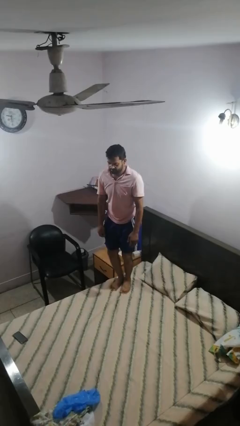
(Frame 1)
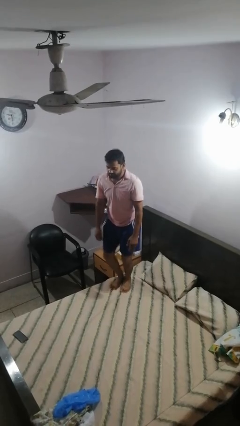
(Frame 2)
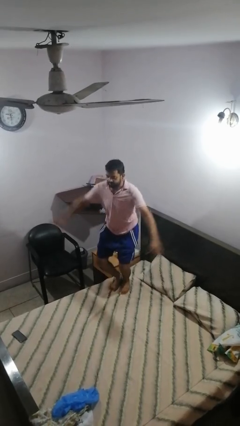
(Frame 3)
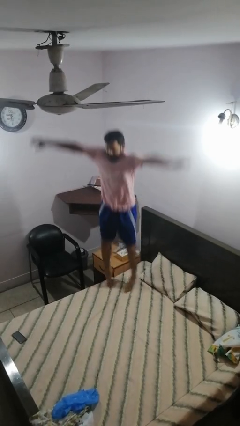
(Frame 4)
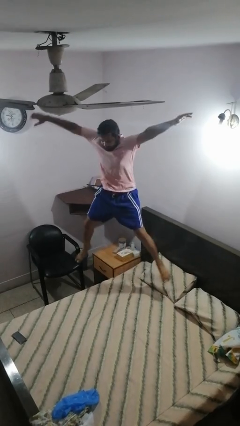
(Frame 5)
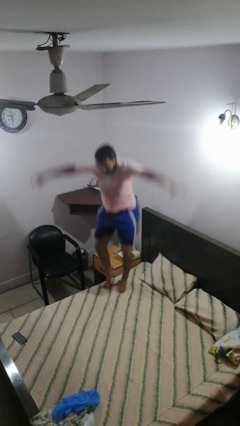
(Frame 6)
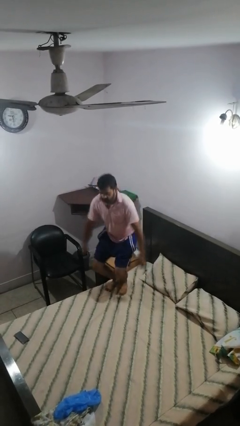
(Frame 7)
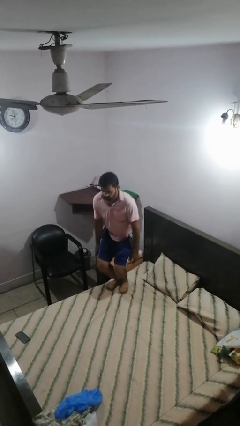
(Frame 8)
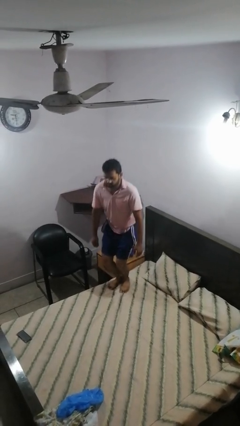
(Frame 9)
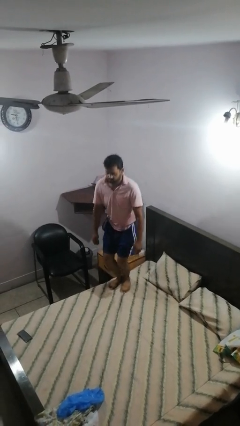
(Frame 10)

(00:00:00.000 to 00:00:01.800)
person jumps on bed

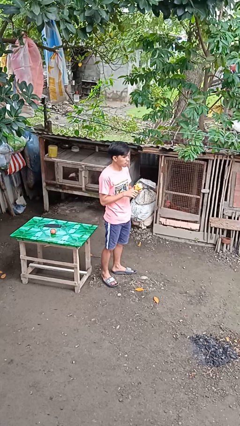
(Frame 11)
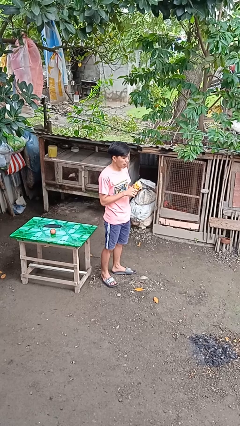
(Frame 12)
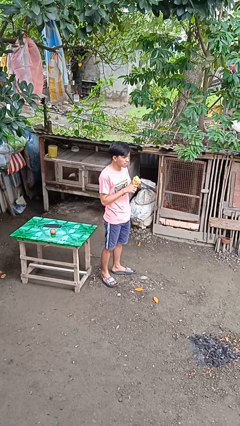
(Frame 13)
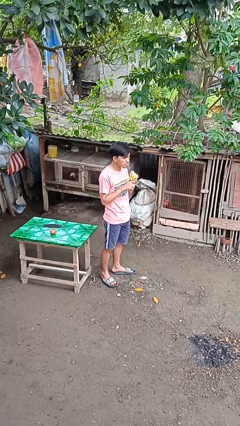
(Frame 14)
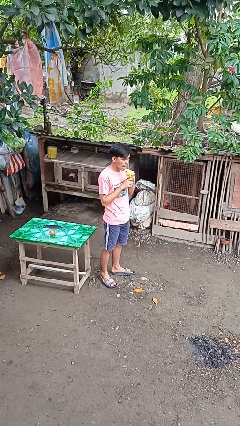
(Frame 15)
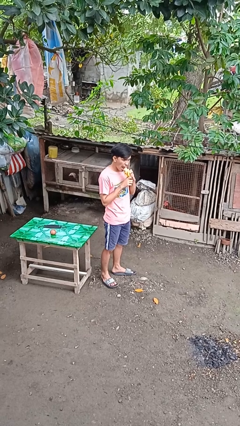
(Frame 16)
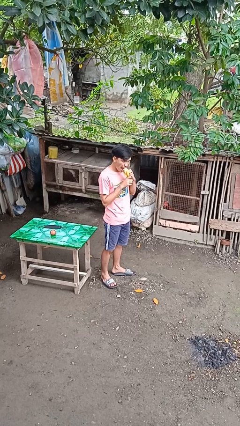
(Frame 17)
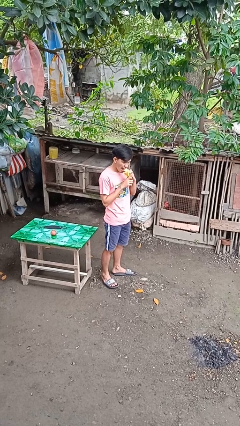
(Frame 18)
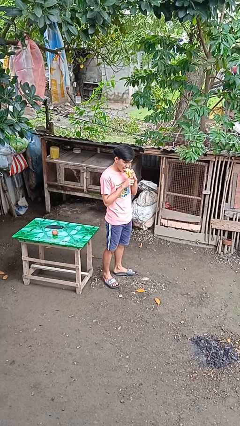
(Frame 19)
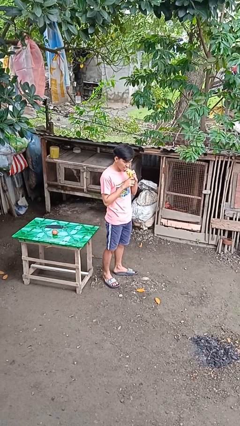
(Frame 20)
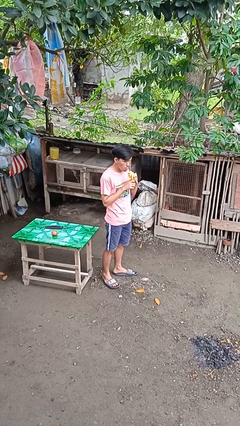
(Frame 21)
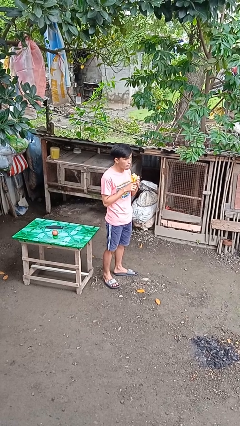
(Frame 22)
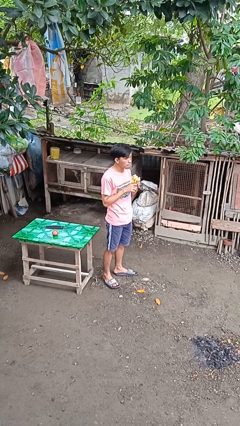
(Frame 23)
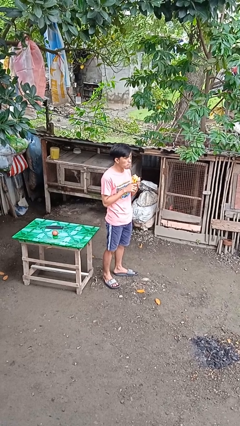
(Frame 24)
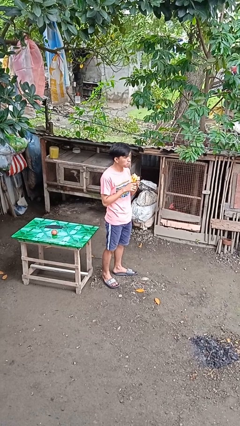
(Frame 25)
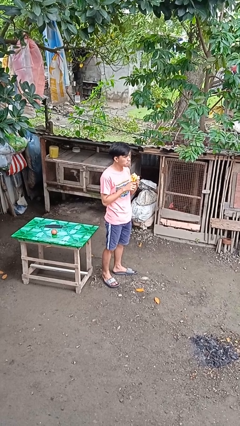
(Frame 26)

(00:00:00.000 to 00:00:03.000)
person eats banana

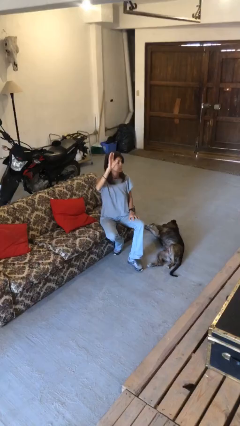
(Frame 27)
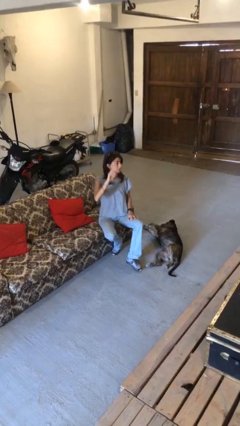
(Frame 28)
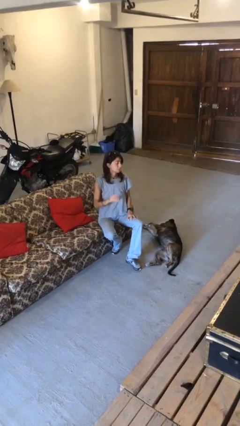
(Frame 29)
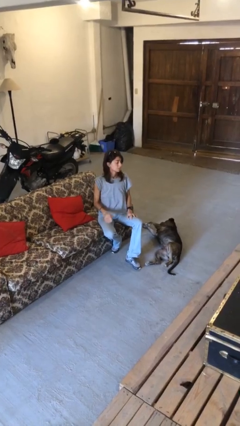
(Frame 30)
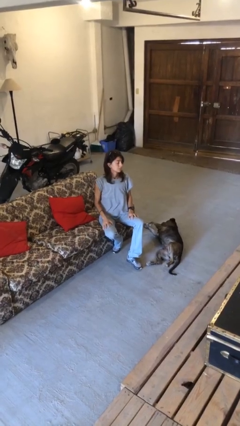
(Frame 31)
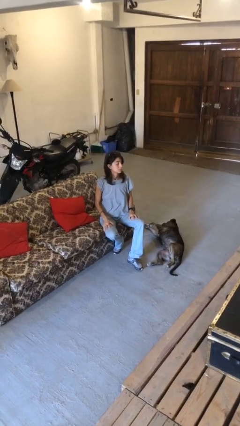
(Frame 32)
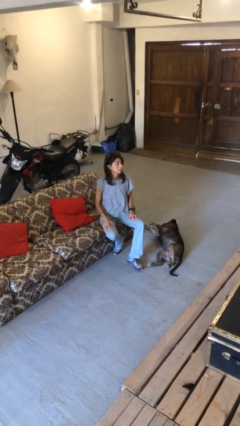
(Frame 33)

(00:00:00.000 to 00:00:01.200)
person gestures lower hand

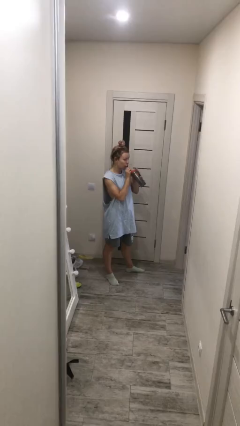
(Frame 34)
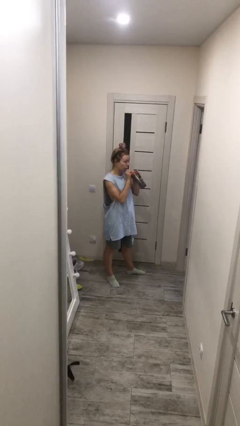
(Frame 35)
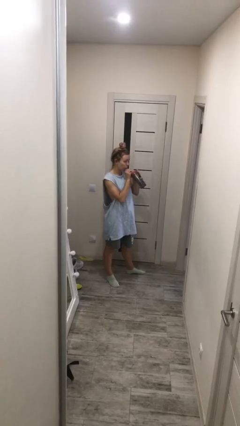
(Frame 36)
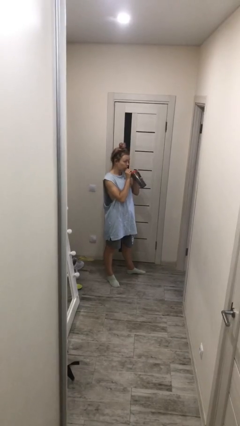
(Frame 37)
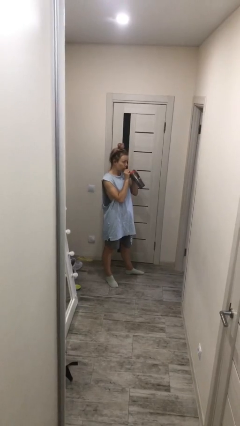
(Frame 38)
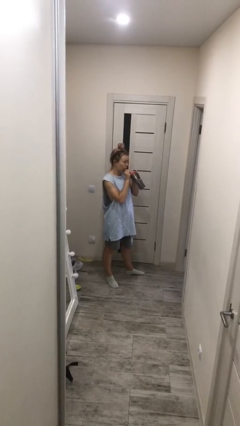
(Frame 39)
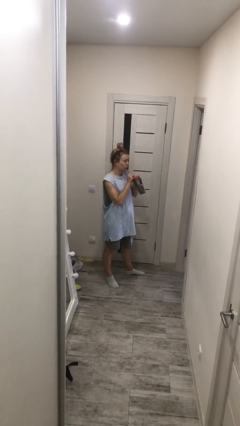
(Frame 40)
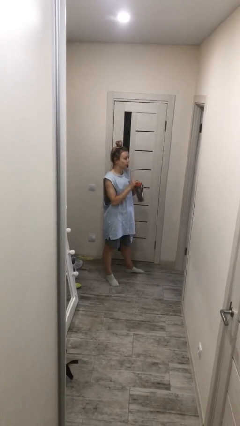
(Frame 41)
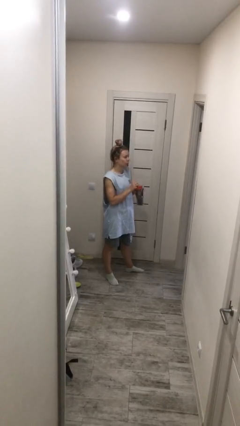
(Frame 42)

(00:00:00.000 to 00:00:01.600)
person drinks from straw

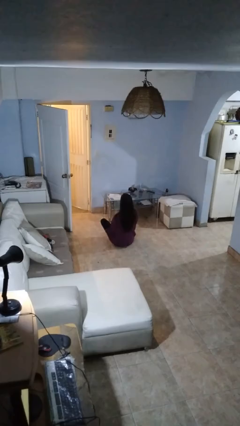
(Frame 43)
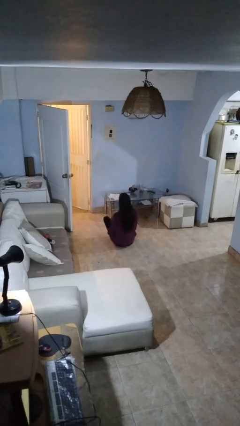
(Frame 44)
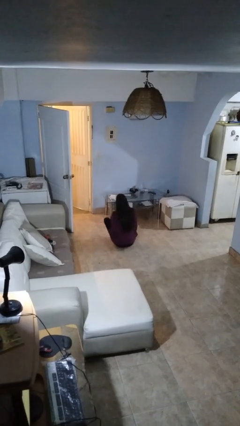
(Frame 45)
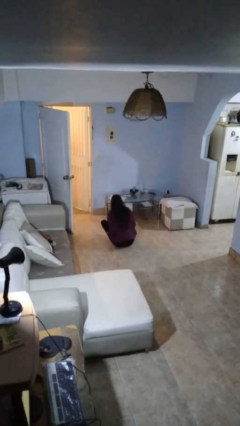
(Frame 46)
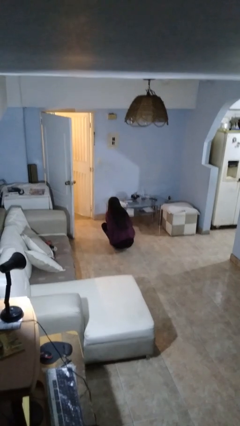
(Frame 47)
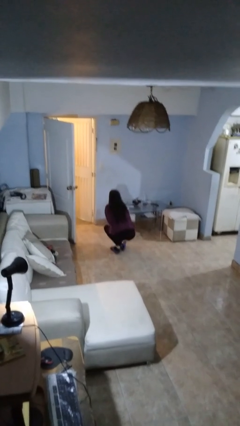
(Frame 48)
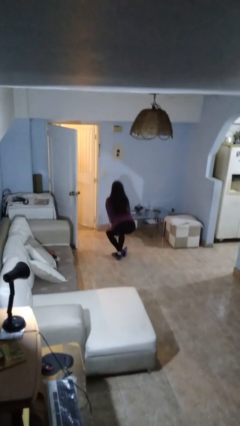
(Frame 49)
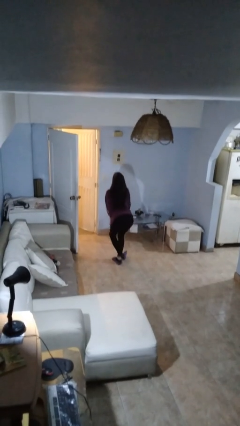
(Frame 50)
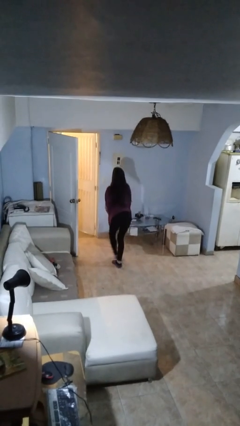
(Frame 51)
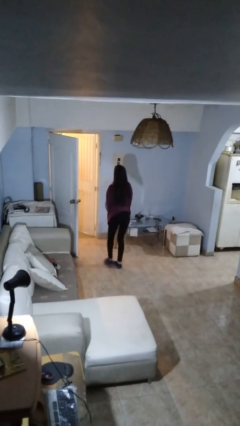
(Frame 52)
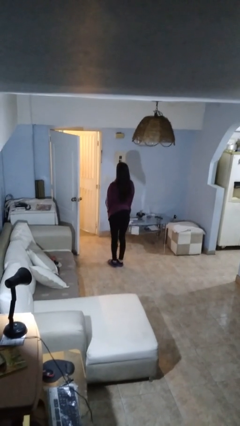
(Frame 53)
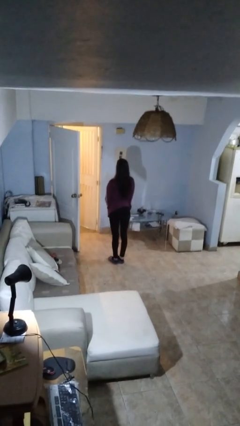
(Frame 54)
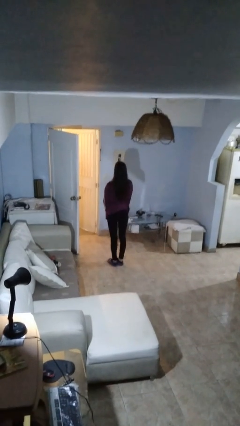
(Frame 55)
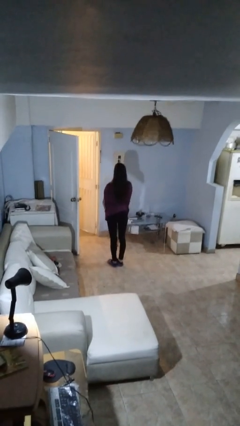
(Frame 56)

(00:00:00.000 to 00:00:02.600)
person stands up from floor

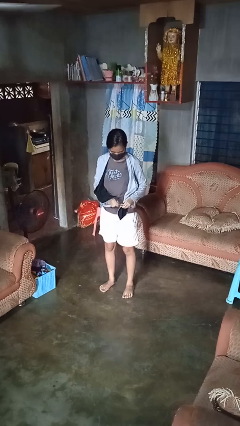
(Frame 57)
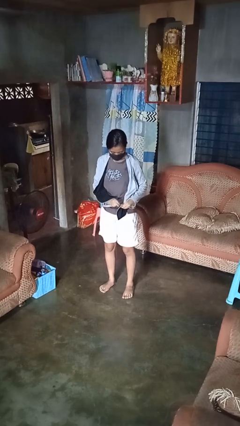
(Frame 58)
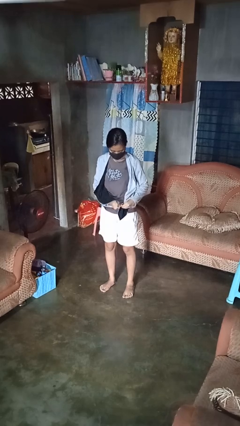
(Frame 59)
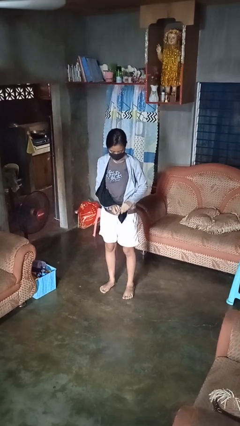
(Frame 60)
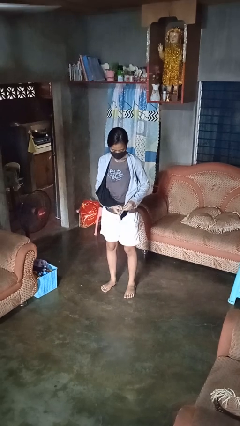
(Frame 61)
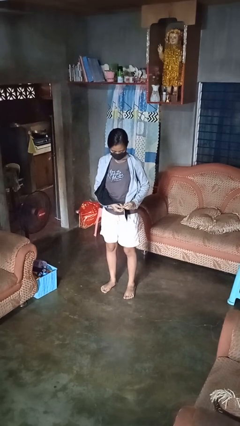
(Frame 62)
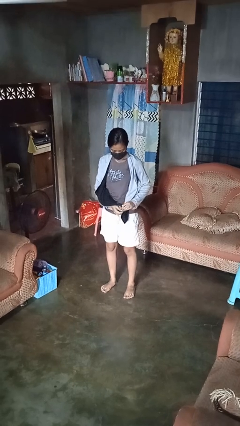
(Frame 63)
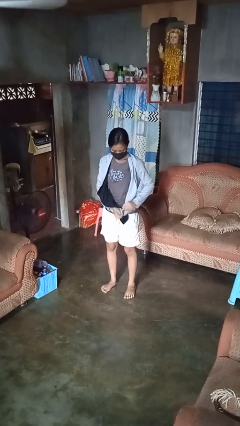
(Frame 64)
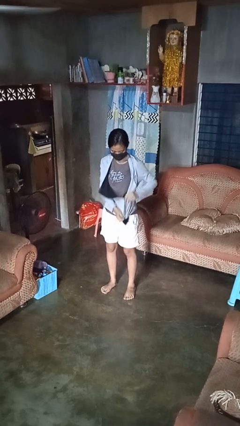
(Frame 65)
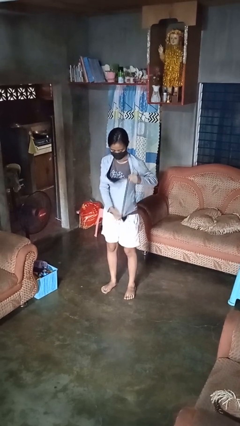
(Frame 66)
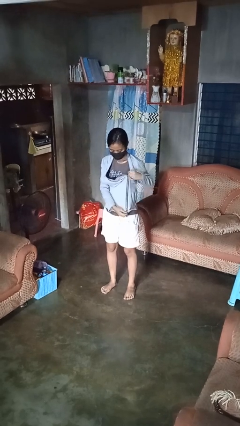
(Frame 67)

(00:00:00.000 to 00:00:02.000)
person zips up jacket

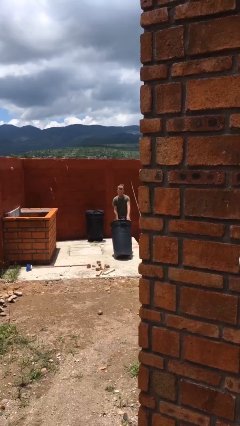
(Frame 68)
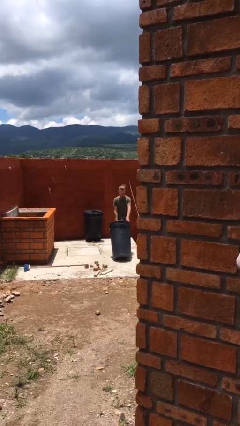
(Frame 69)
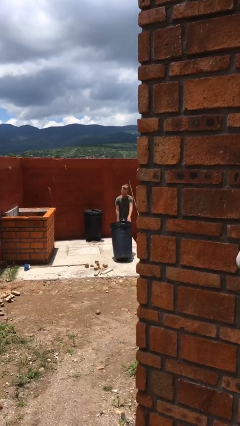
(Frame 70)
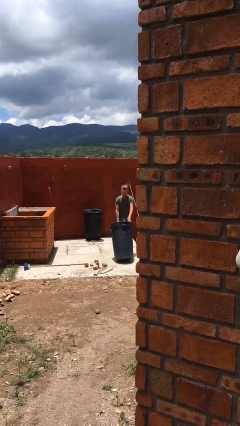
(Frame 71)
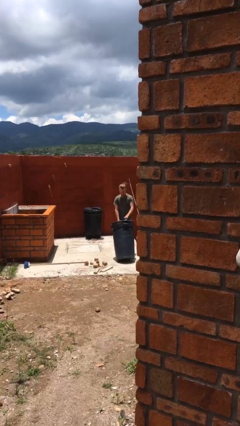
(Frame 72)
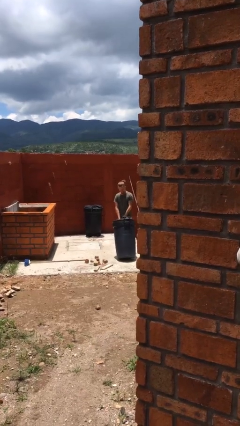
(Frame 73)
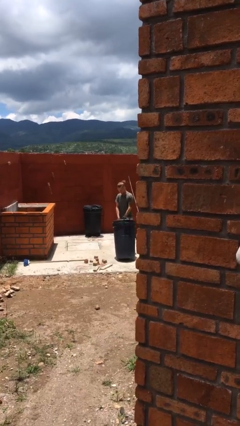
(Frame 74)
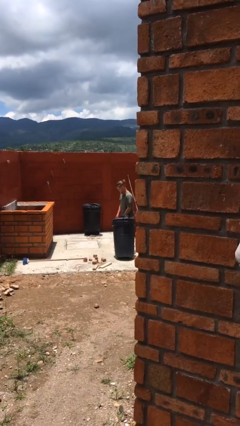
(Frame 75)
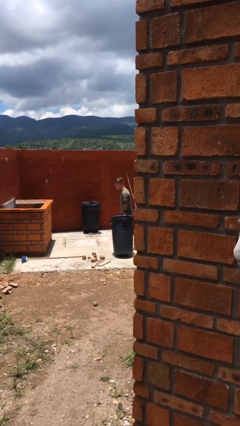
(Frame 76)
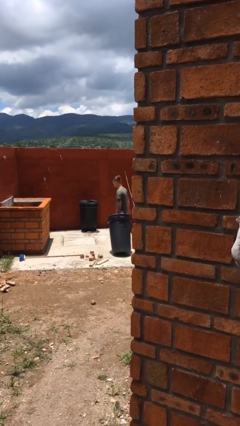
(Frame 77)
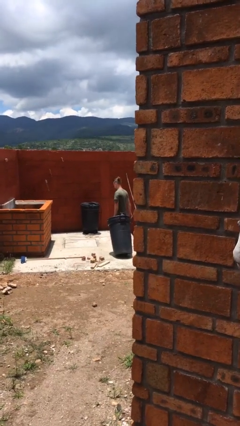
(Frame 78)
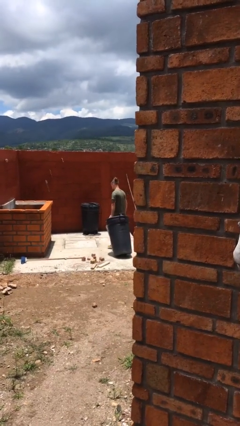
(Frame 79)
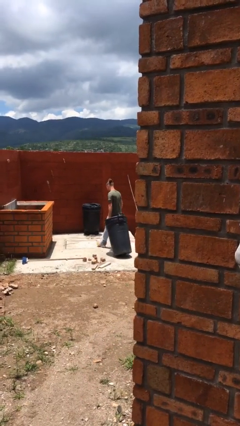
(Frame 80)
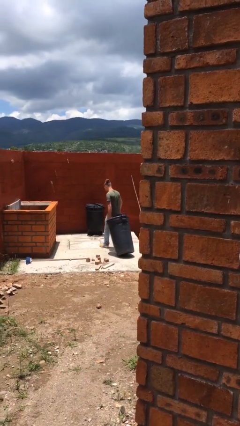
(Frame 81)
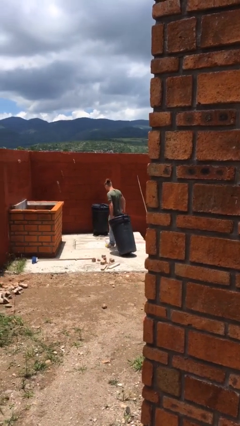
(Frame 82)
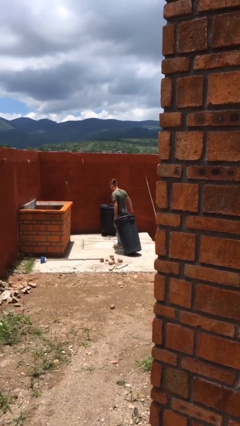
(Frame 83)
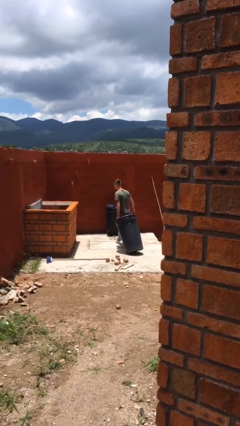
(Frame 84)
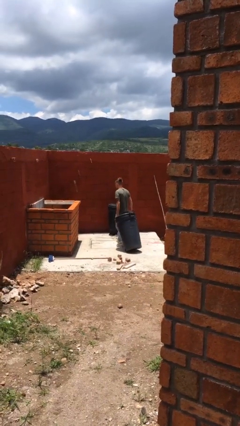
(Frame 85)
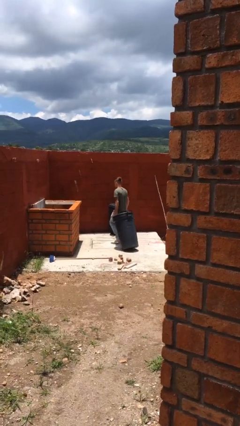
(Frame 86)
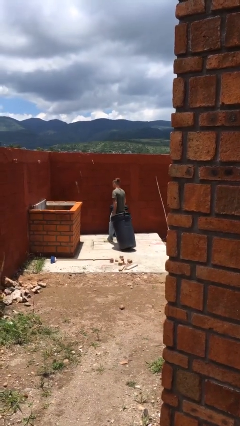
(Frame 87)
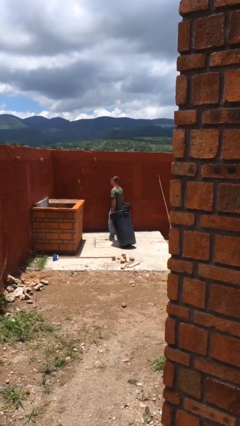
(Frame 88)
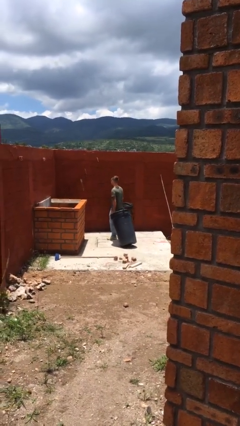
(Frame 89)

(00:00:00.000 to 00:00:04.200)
person pulls wheeled trashcan

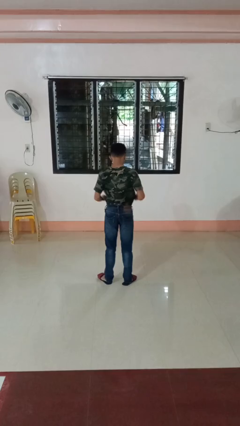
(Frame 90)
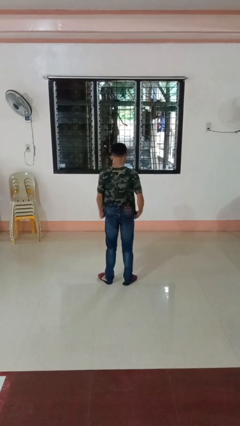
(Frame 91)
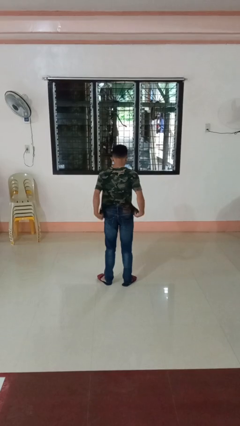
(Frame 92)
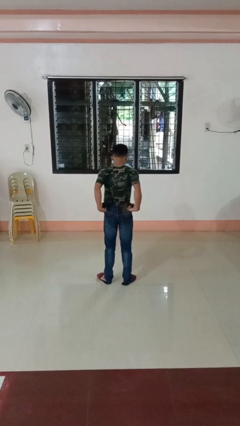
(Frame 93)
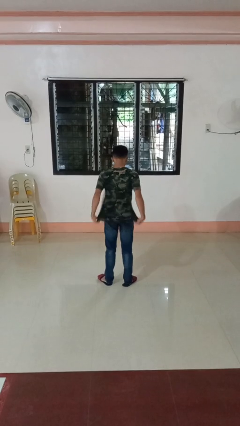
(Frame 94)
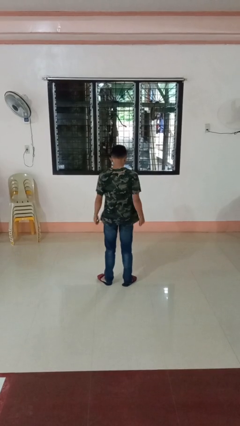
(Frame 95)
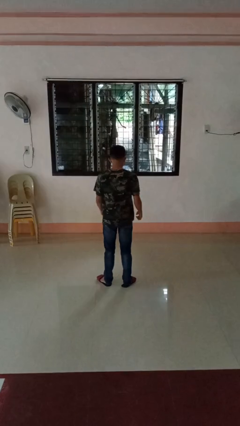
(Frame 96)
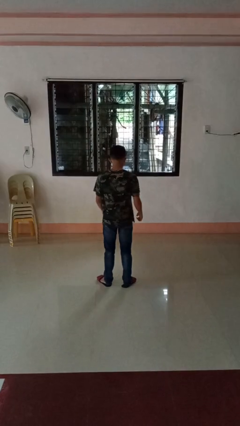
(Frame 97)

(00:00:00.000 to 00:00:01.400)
person untucks shirt
